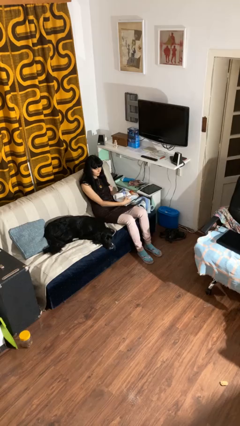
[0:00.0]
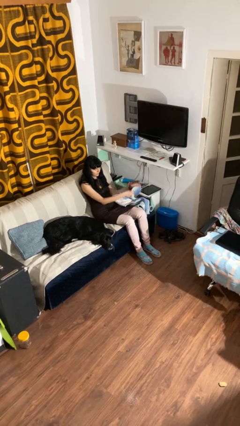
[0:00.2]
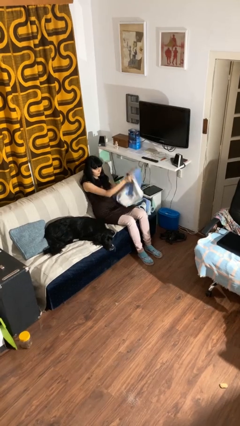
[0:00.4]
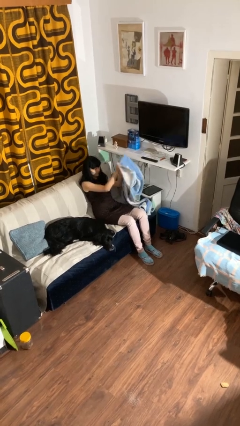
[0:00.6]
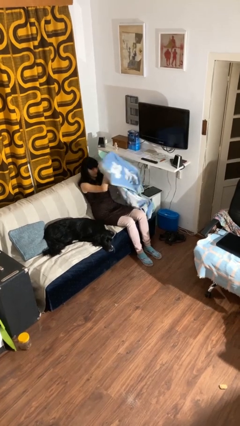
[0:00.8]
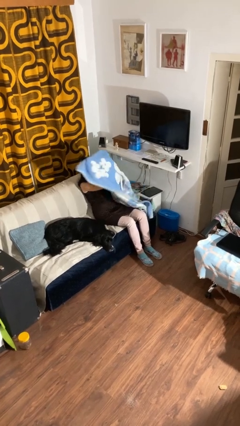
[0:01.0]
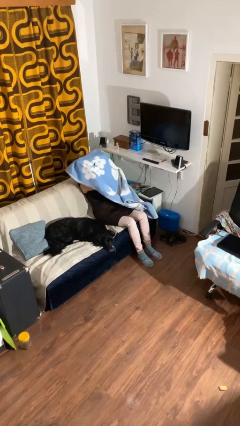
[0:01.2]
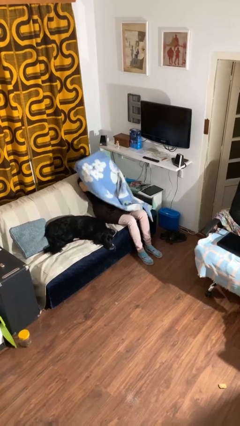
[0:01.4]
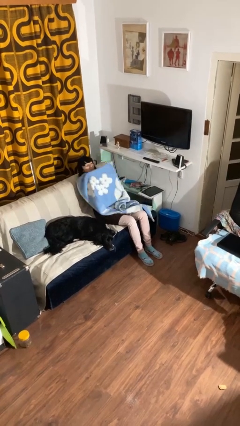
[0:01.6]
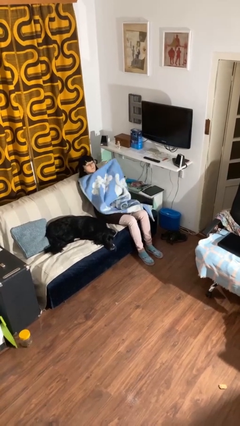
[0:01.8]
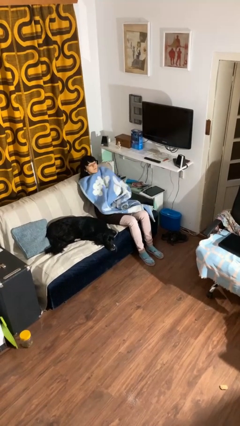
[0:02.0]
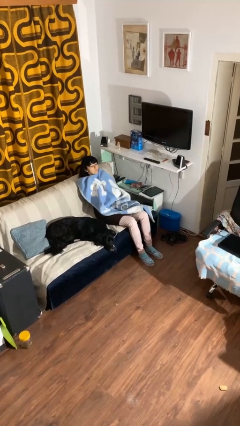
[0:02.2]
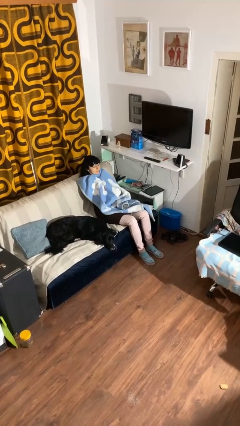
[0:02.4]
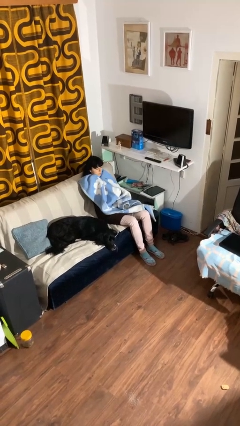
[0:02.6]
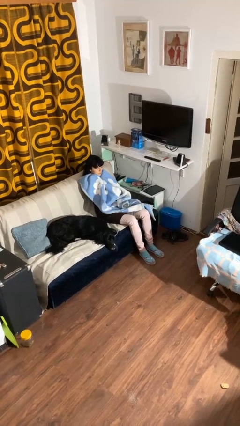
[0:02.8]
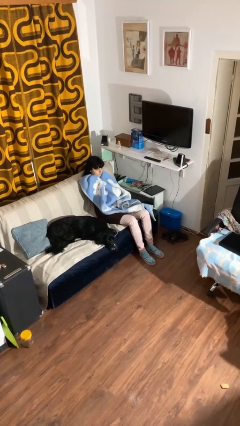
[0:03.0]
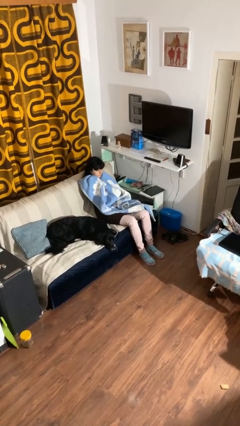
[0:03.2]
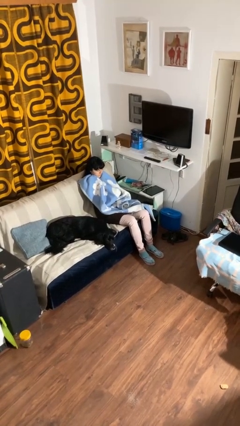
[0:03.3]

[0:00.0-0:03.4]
person covers with blanket

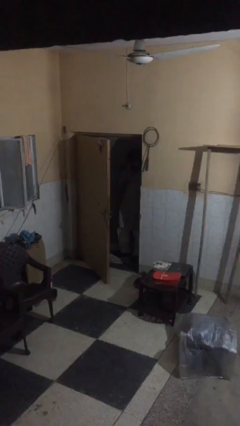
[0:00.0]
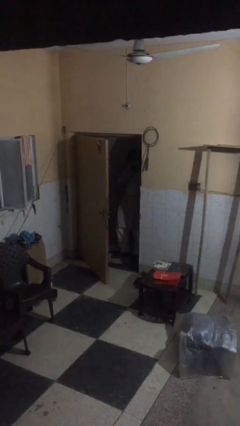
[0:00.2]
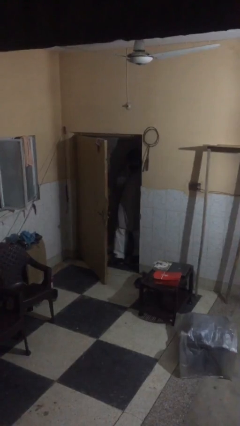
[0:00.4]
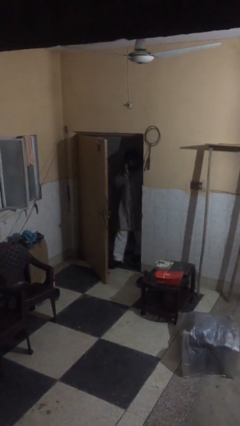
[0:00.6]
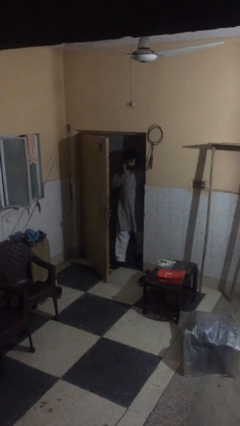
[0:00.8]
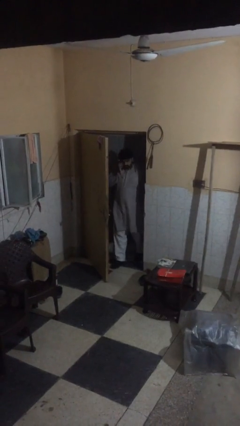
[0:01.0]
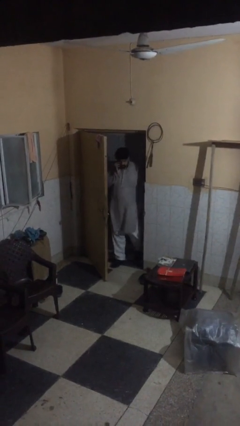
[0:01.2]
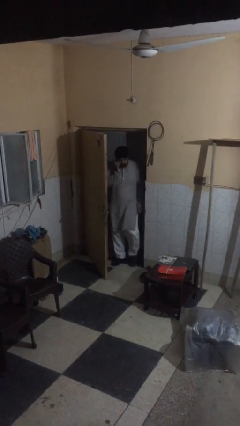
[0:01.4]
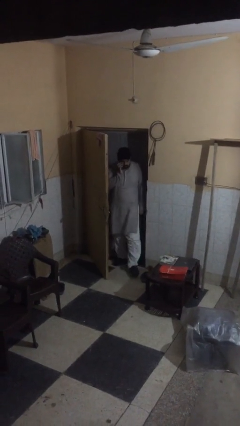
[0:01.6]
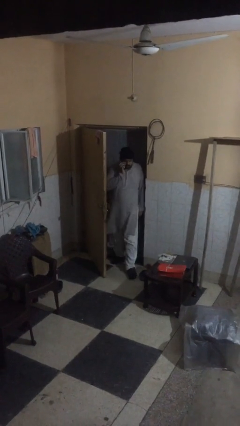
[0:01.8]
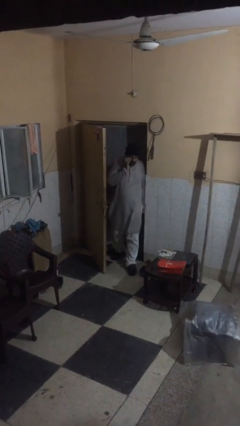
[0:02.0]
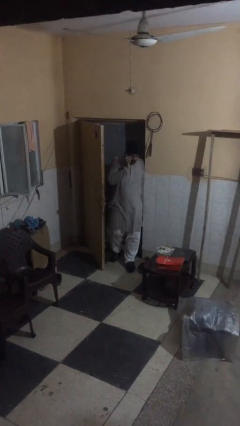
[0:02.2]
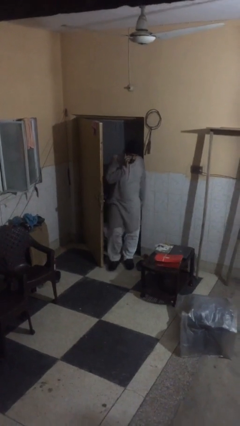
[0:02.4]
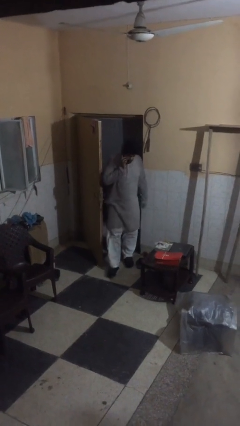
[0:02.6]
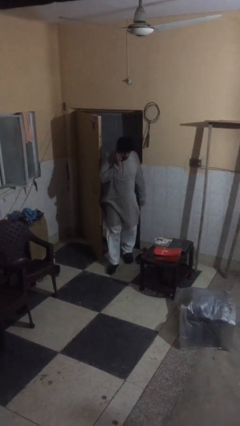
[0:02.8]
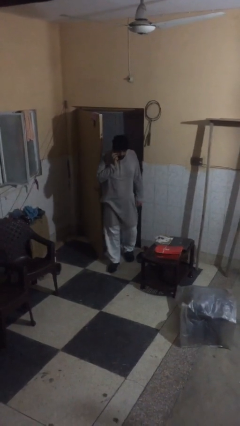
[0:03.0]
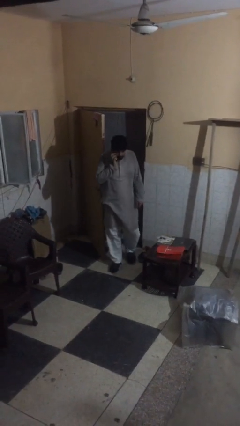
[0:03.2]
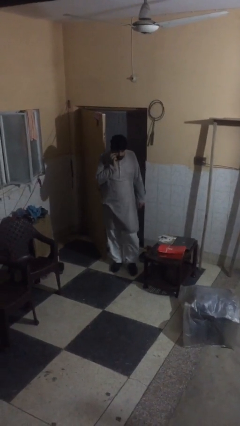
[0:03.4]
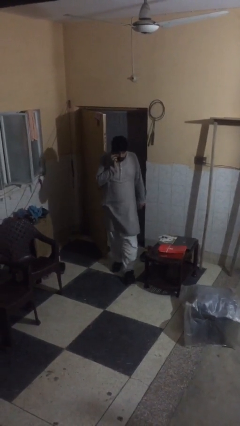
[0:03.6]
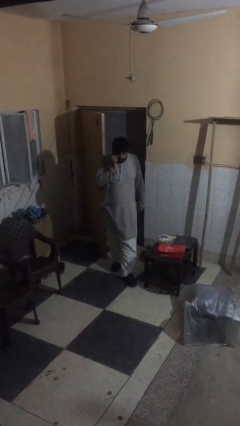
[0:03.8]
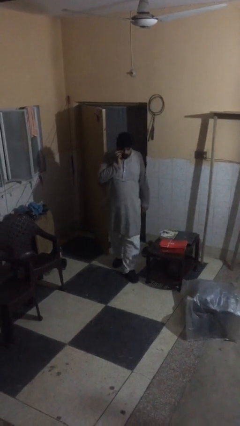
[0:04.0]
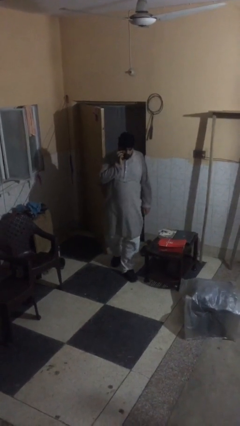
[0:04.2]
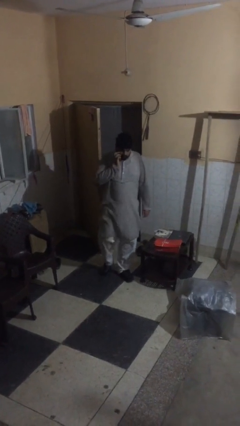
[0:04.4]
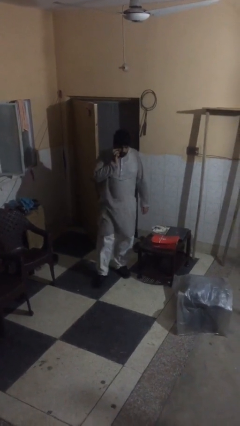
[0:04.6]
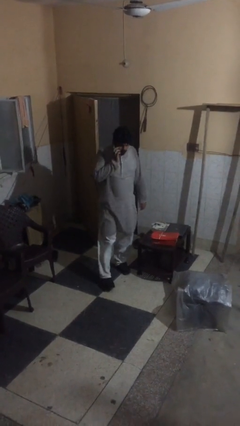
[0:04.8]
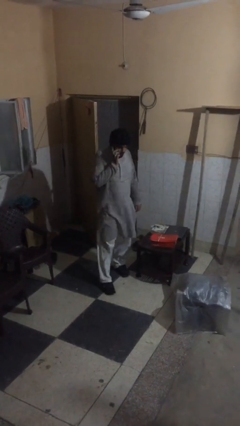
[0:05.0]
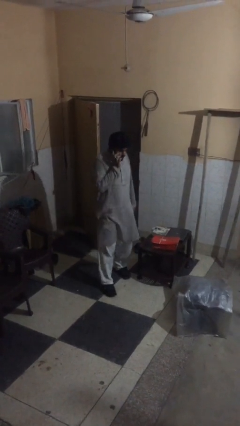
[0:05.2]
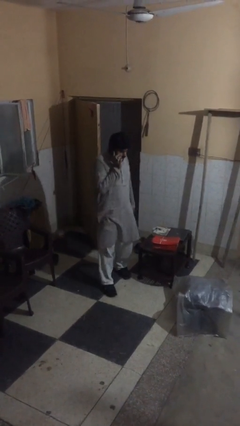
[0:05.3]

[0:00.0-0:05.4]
person enters scene through structure

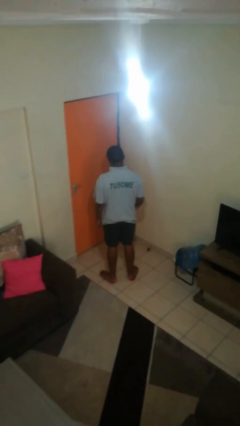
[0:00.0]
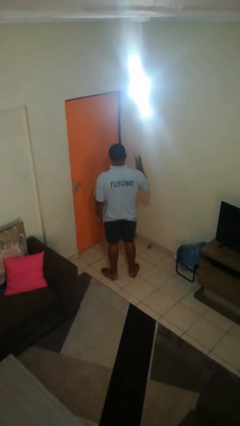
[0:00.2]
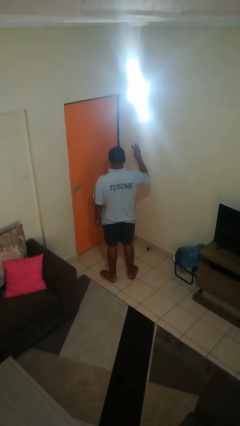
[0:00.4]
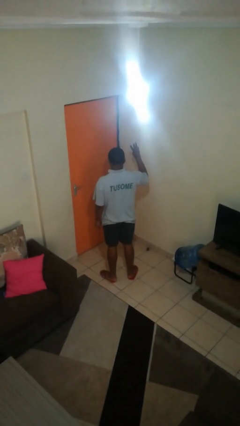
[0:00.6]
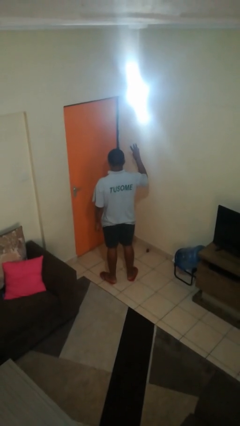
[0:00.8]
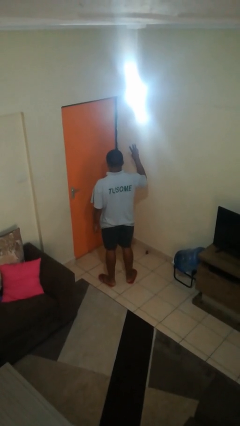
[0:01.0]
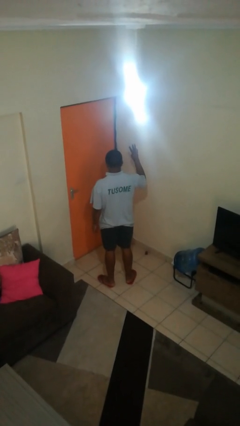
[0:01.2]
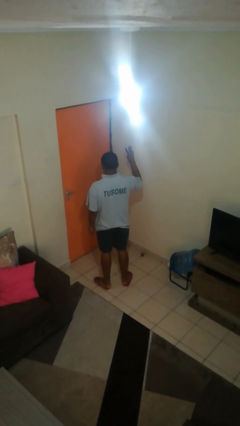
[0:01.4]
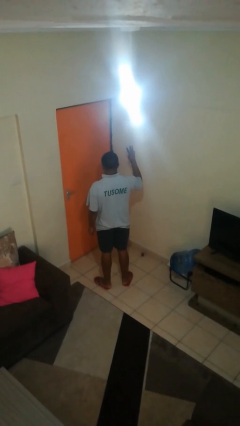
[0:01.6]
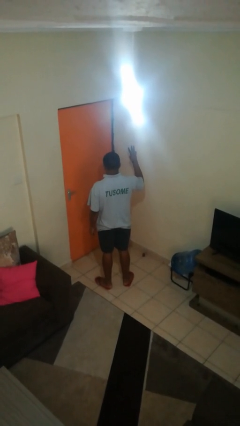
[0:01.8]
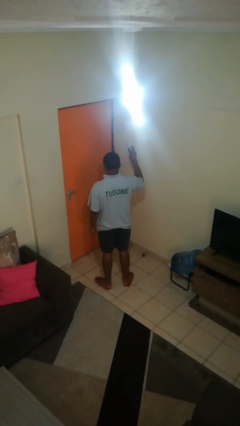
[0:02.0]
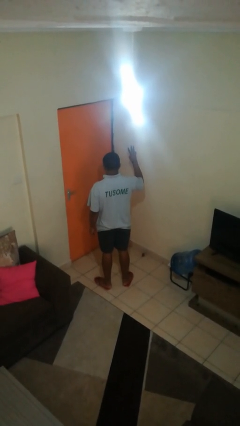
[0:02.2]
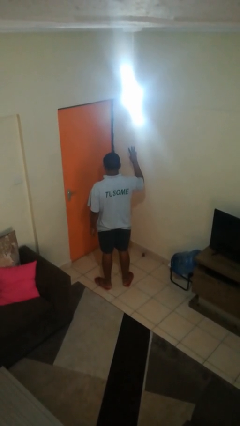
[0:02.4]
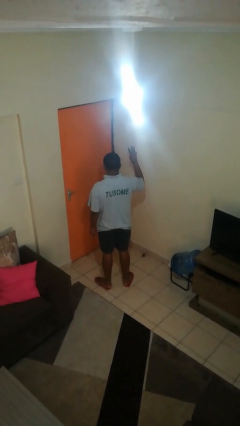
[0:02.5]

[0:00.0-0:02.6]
person gestures number three

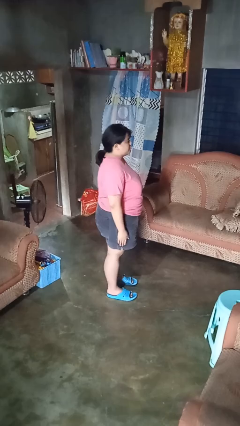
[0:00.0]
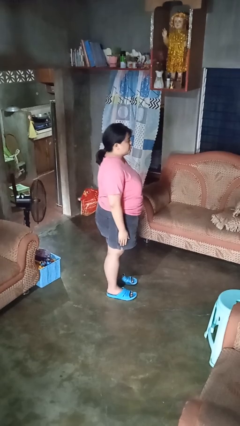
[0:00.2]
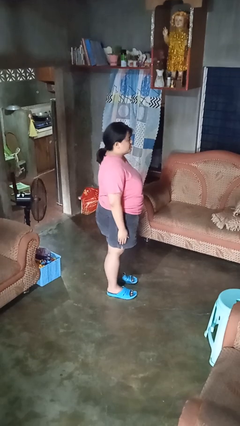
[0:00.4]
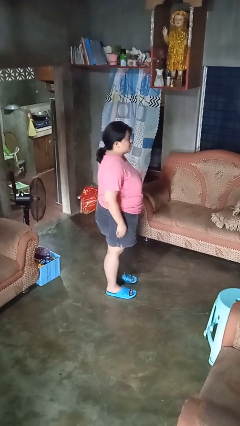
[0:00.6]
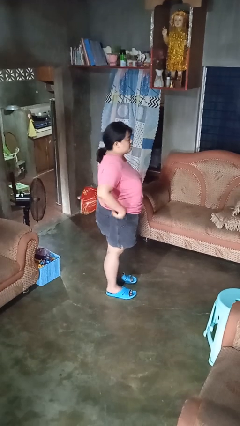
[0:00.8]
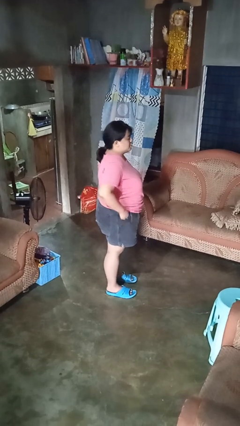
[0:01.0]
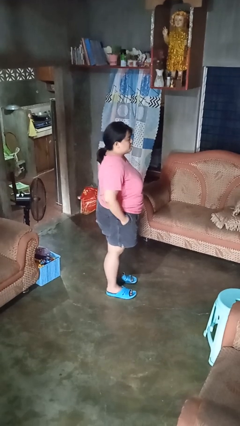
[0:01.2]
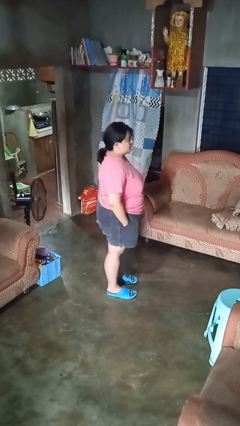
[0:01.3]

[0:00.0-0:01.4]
person puts hands in back pockets

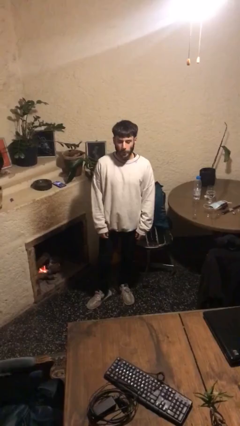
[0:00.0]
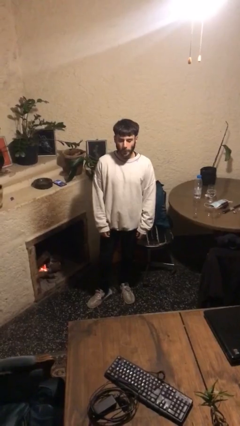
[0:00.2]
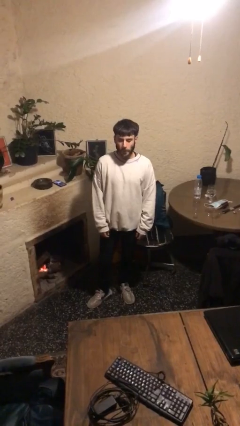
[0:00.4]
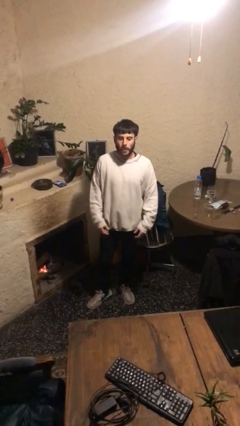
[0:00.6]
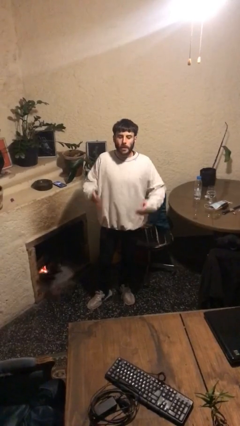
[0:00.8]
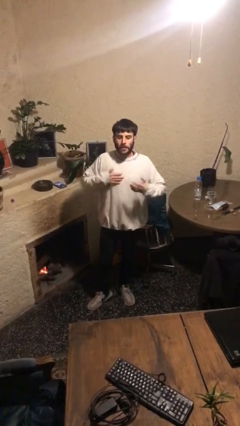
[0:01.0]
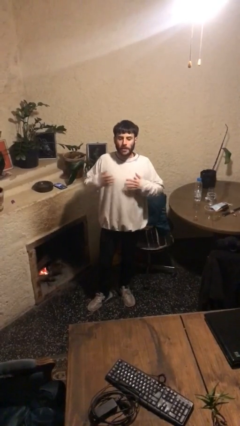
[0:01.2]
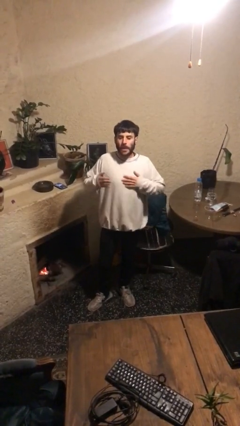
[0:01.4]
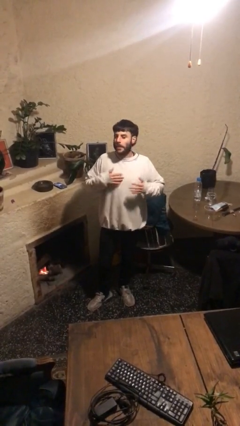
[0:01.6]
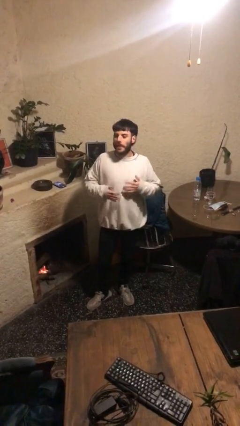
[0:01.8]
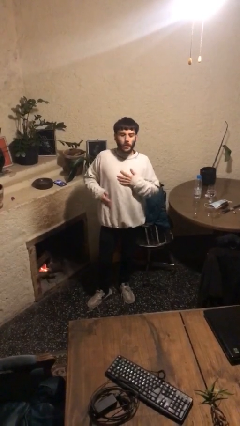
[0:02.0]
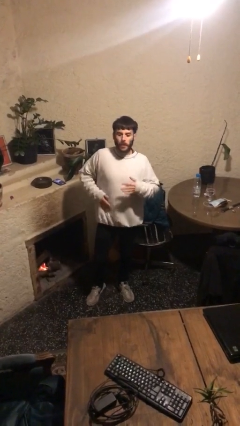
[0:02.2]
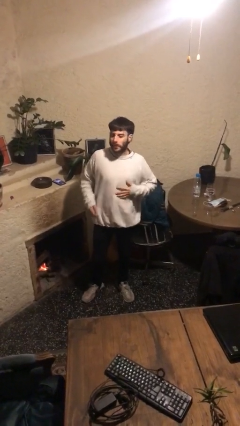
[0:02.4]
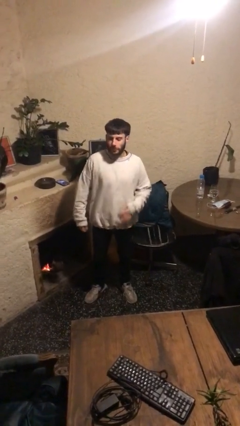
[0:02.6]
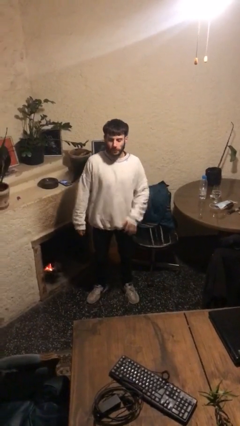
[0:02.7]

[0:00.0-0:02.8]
person drums on chest

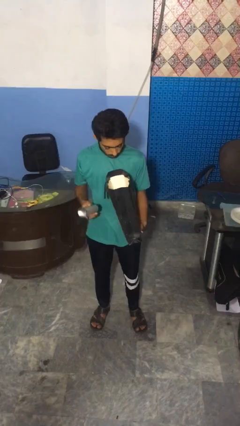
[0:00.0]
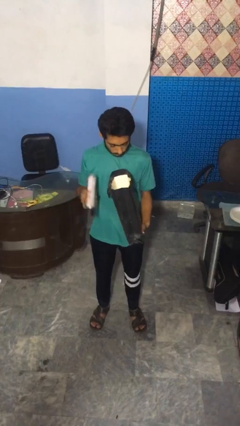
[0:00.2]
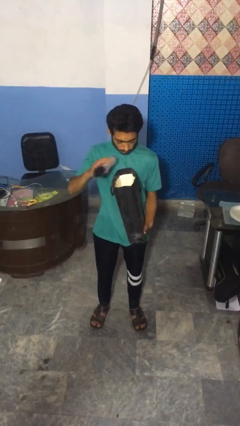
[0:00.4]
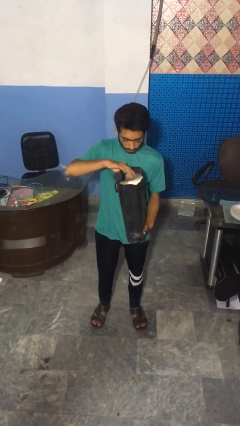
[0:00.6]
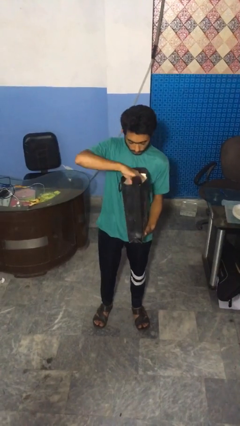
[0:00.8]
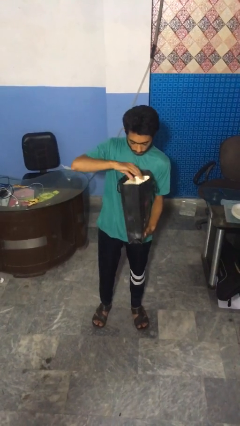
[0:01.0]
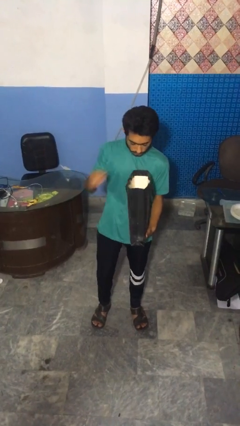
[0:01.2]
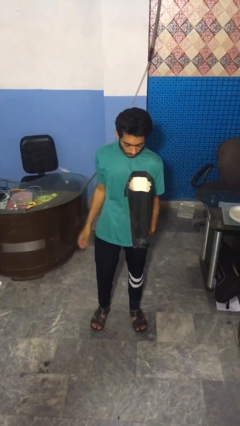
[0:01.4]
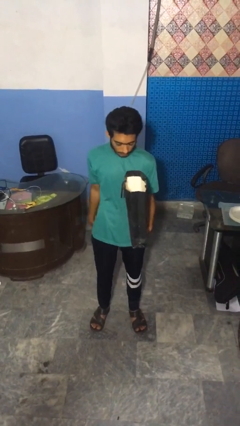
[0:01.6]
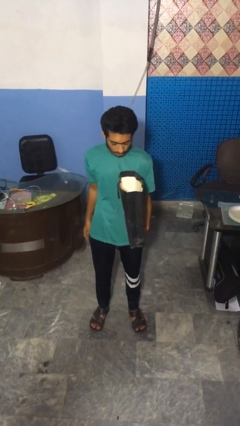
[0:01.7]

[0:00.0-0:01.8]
person puts object into bag
